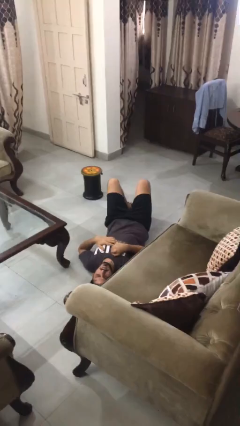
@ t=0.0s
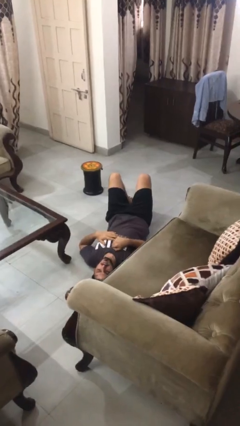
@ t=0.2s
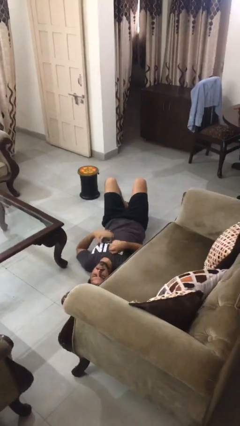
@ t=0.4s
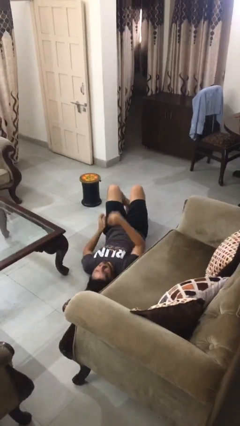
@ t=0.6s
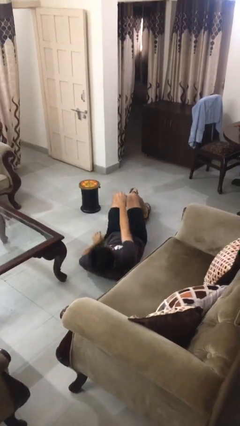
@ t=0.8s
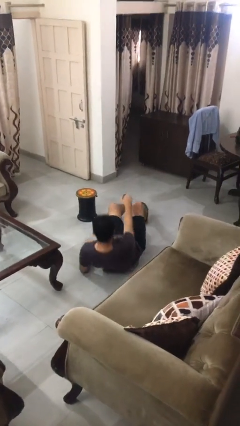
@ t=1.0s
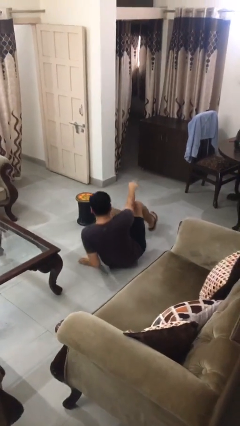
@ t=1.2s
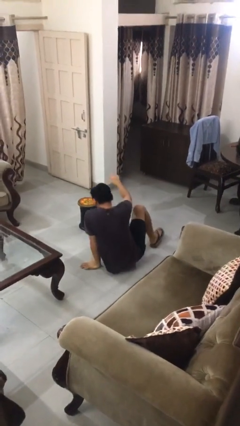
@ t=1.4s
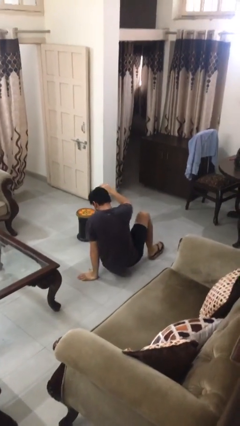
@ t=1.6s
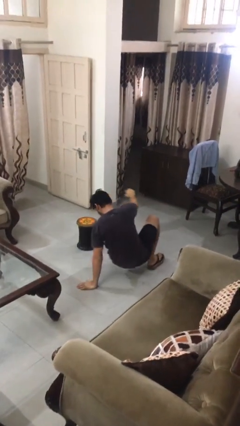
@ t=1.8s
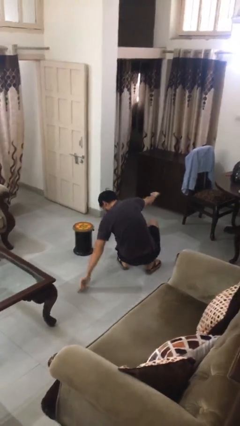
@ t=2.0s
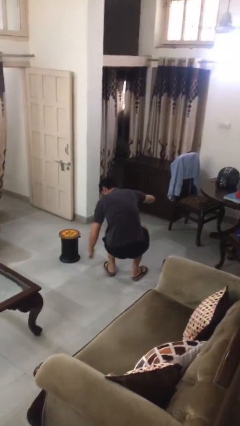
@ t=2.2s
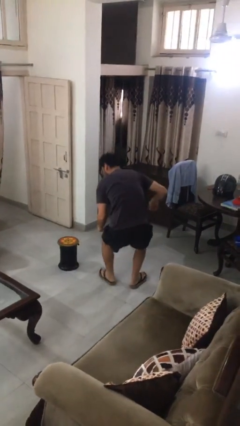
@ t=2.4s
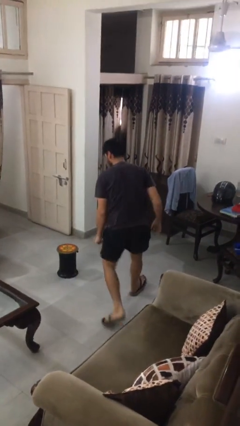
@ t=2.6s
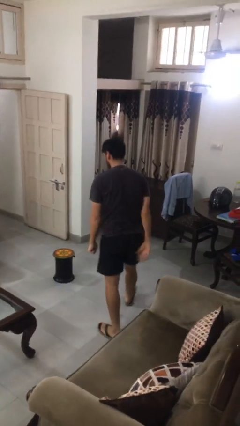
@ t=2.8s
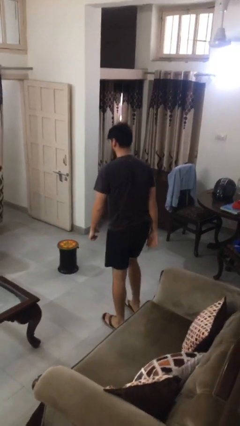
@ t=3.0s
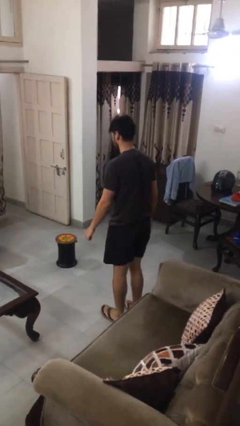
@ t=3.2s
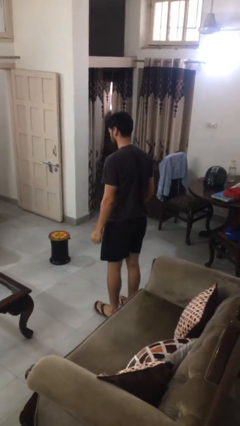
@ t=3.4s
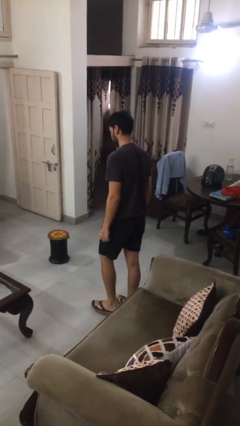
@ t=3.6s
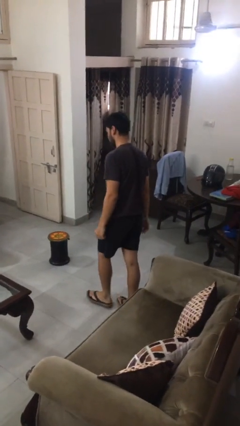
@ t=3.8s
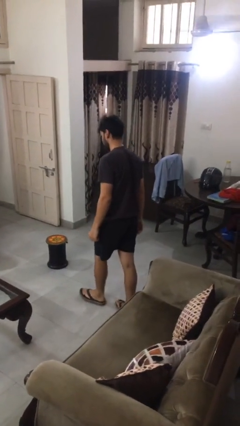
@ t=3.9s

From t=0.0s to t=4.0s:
person stands up from floor

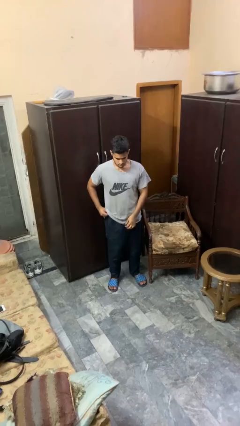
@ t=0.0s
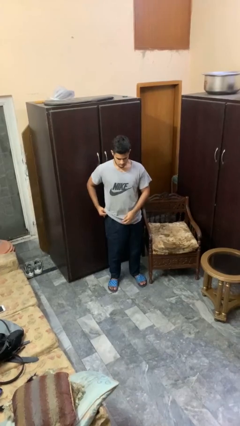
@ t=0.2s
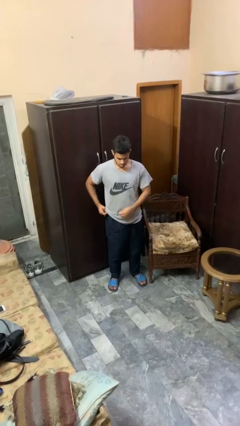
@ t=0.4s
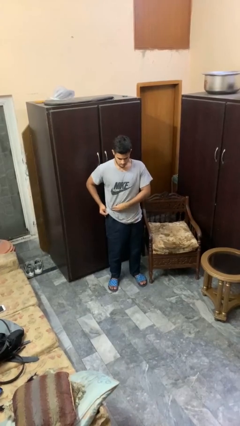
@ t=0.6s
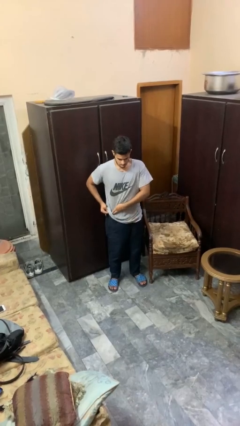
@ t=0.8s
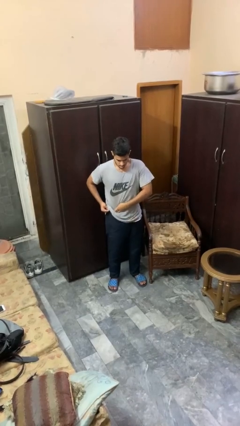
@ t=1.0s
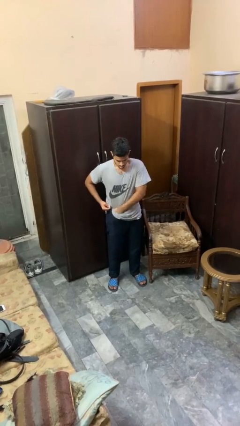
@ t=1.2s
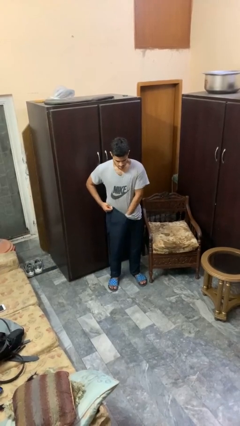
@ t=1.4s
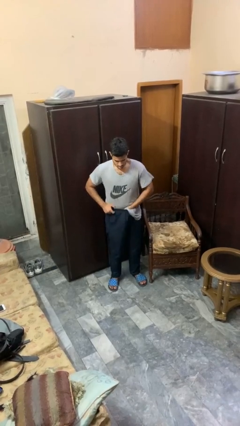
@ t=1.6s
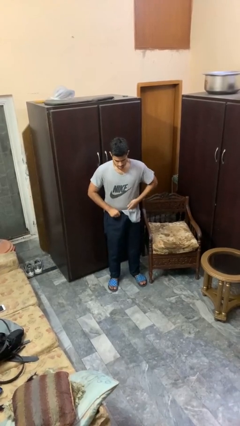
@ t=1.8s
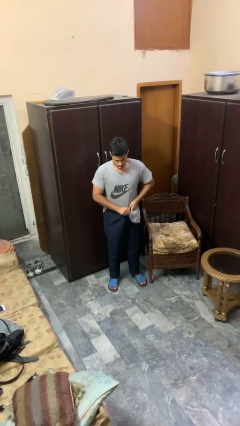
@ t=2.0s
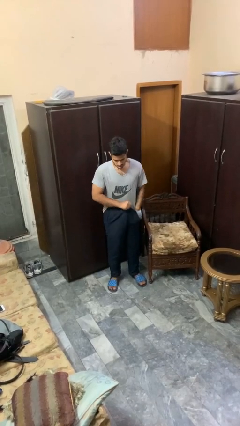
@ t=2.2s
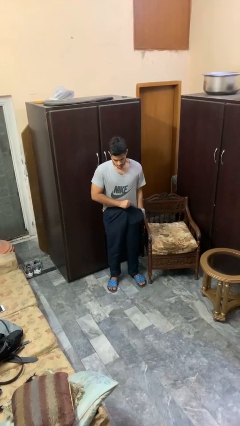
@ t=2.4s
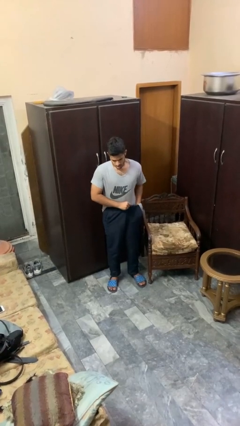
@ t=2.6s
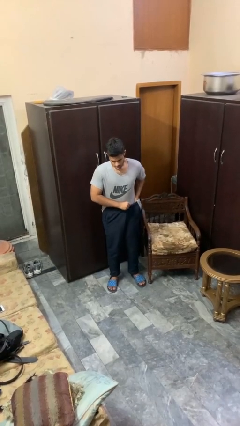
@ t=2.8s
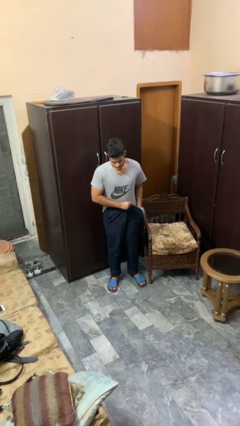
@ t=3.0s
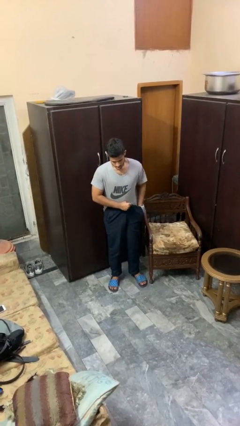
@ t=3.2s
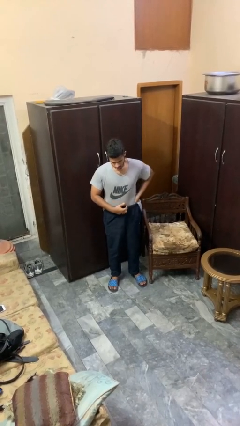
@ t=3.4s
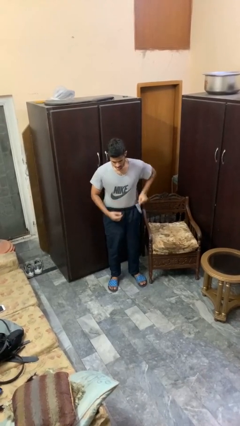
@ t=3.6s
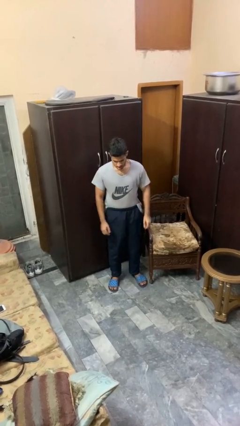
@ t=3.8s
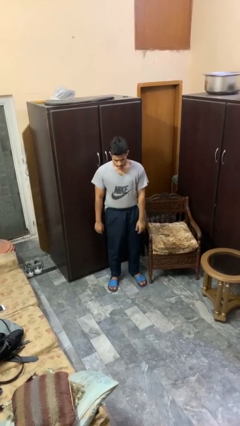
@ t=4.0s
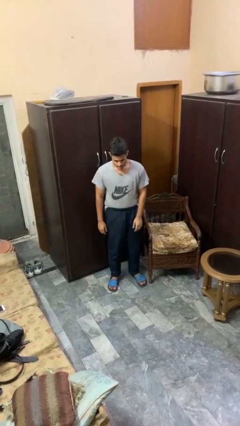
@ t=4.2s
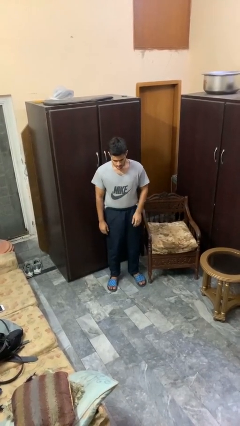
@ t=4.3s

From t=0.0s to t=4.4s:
person tucks in shirt

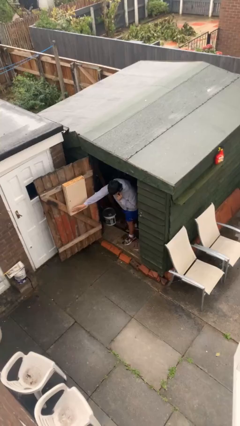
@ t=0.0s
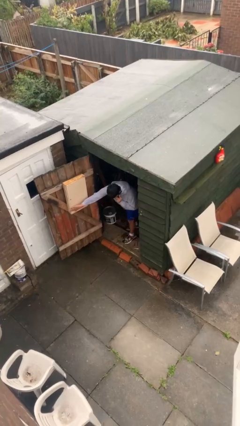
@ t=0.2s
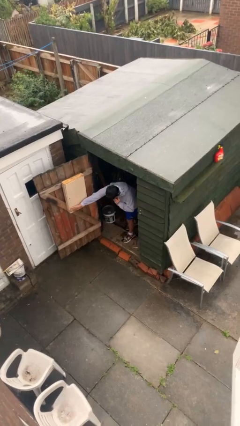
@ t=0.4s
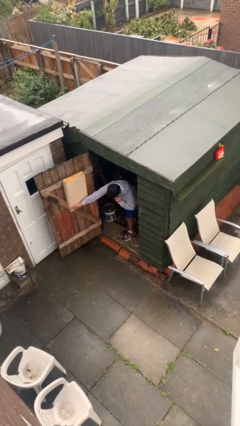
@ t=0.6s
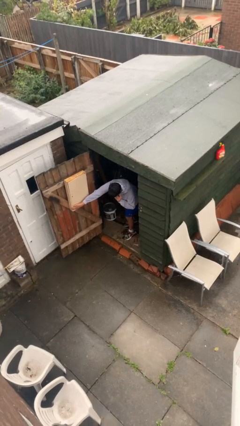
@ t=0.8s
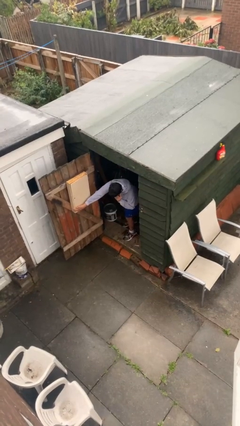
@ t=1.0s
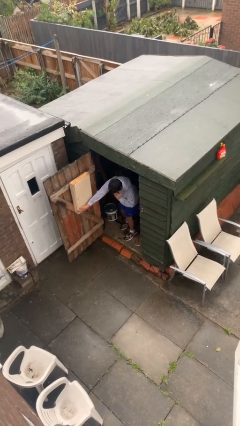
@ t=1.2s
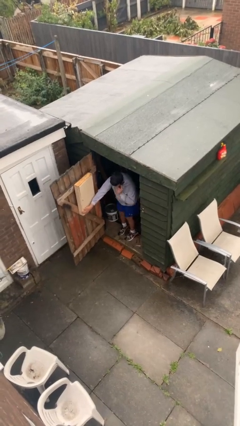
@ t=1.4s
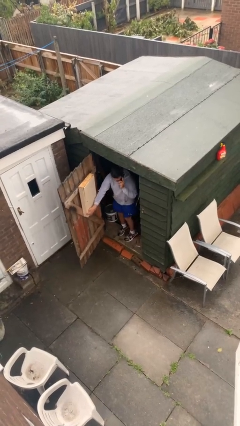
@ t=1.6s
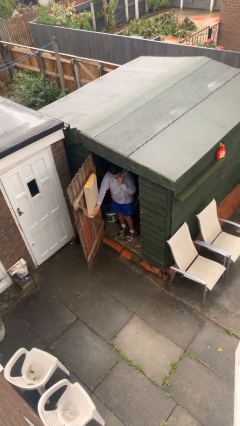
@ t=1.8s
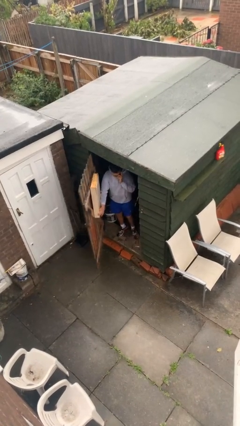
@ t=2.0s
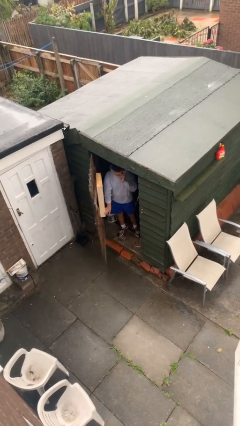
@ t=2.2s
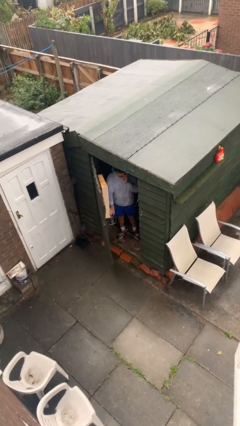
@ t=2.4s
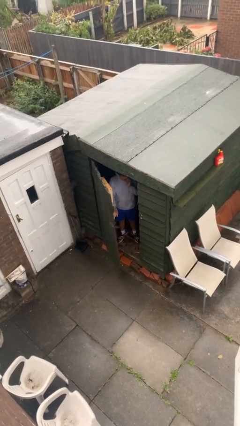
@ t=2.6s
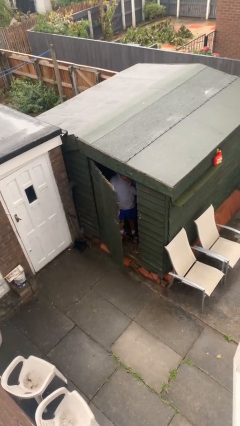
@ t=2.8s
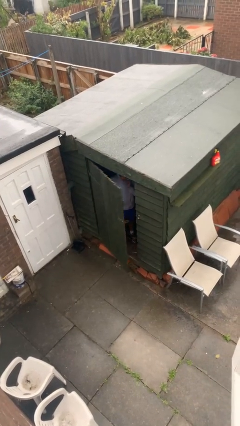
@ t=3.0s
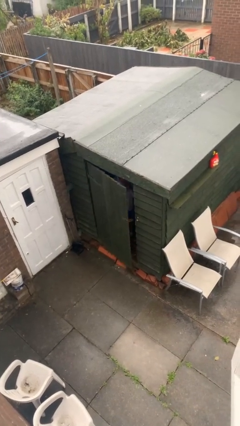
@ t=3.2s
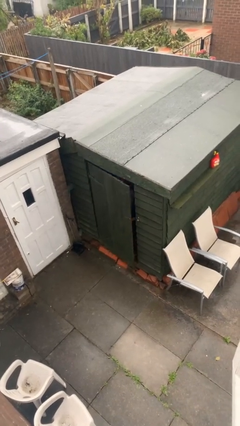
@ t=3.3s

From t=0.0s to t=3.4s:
person closes facility door

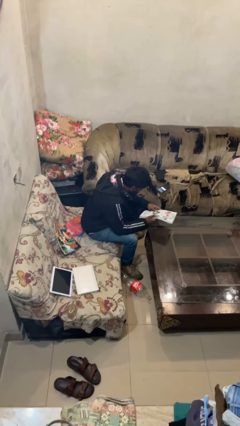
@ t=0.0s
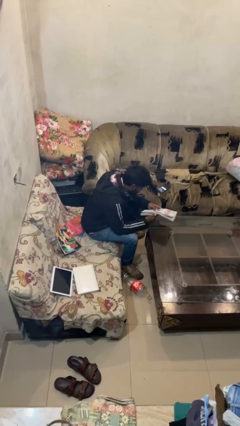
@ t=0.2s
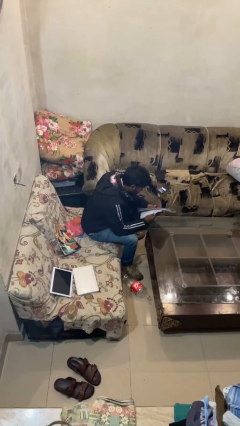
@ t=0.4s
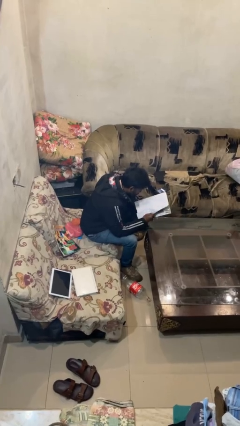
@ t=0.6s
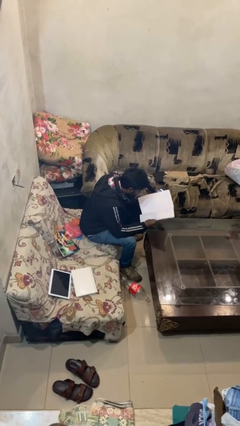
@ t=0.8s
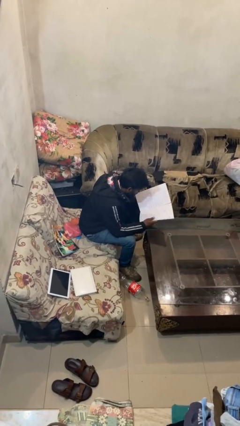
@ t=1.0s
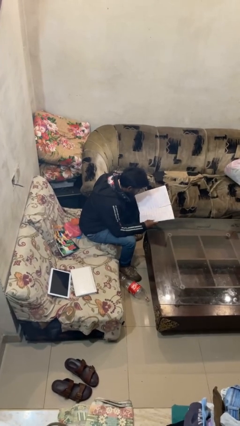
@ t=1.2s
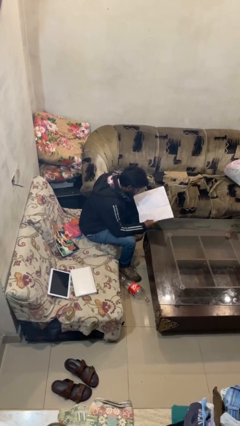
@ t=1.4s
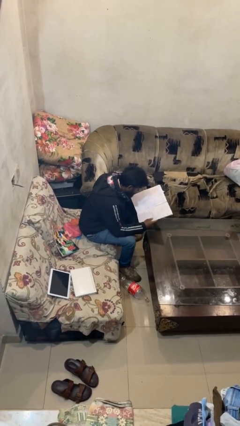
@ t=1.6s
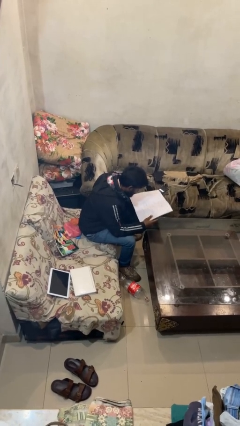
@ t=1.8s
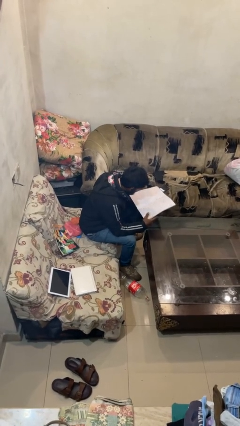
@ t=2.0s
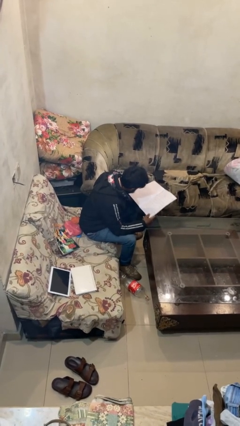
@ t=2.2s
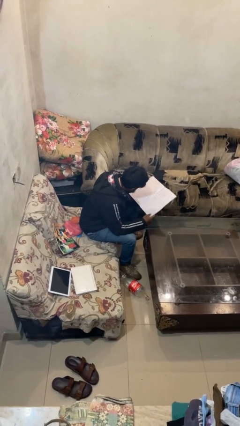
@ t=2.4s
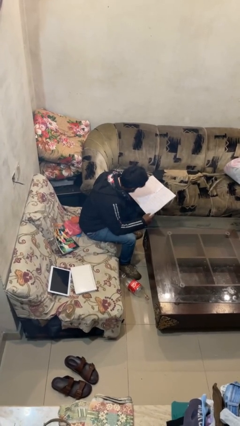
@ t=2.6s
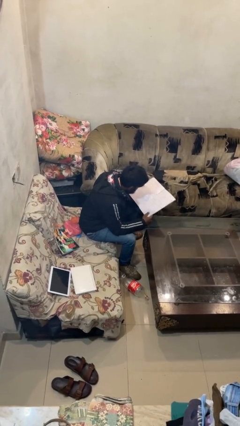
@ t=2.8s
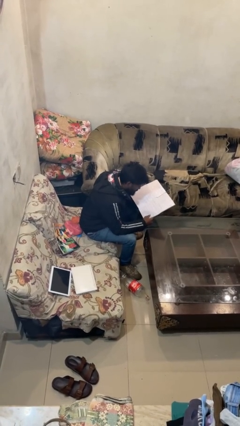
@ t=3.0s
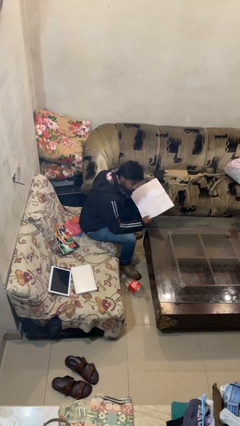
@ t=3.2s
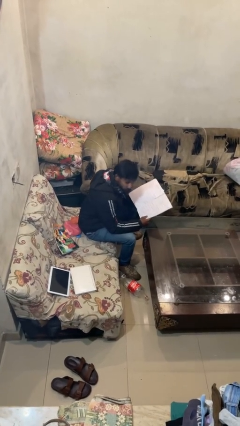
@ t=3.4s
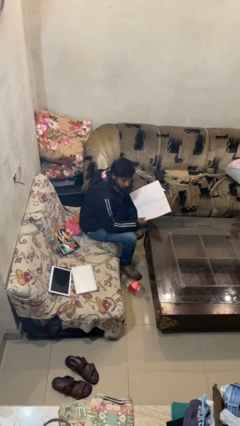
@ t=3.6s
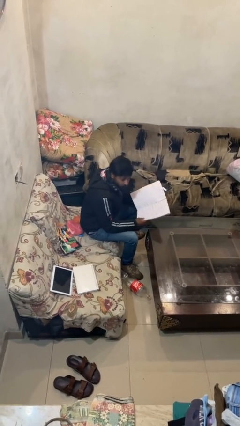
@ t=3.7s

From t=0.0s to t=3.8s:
person reads document

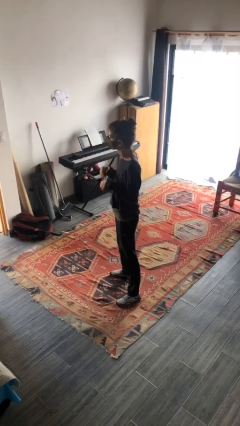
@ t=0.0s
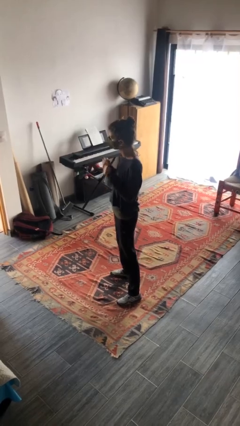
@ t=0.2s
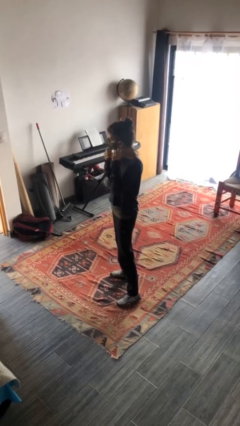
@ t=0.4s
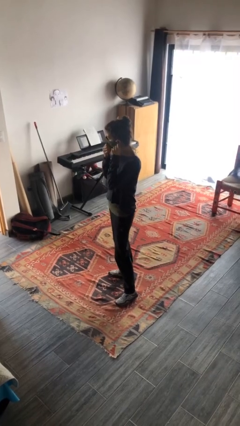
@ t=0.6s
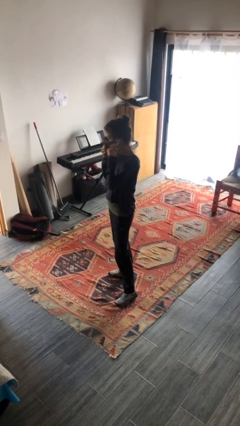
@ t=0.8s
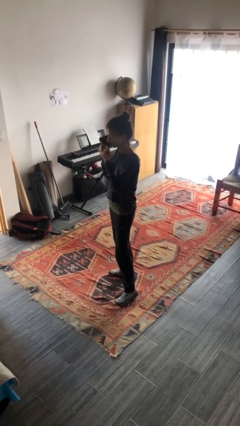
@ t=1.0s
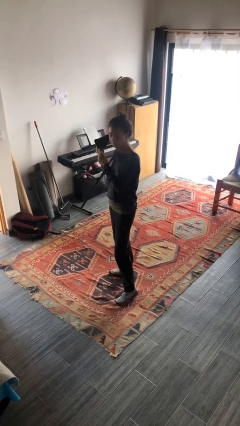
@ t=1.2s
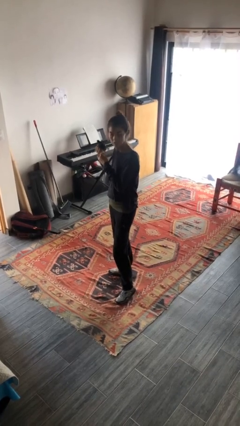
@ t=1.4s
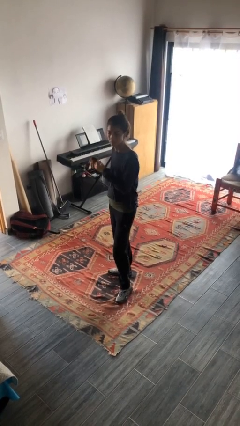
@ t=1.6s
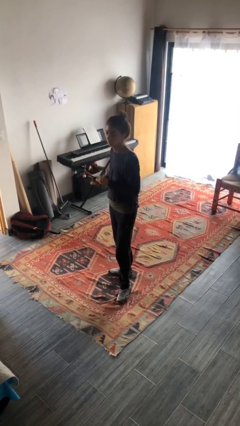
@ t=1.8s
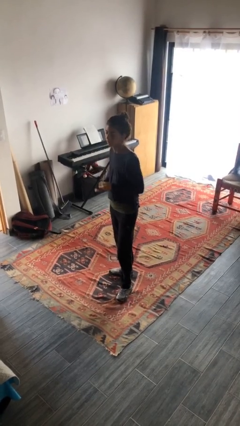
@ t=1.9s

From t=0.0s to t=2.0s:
person takes off facemask

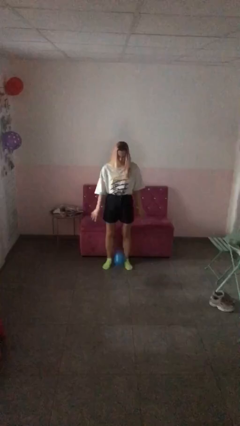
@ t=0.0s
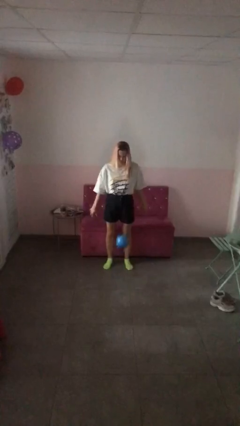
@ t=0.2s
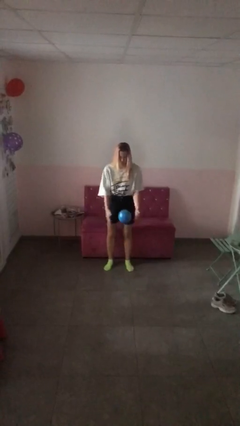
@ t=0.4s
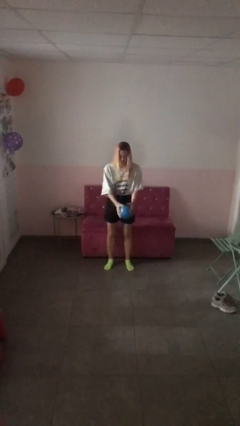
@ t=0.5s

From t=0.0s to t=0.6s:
person bounces ball on floor
